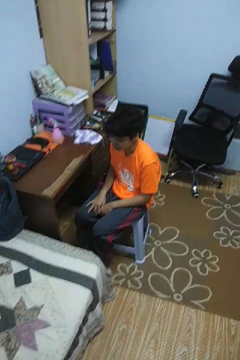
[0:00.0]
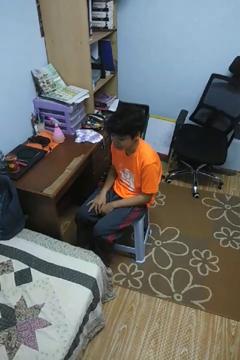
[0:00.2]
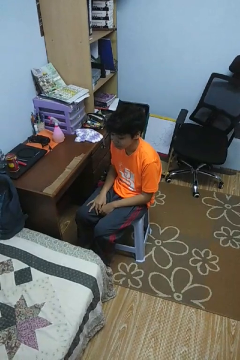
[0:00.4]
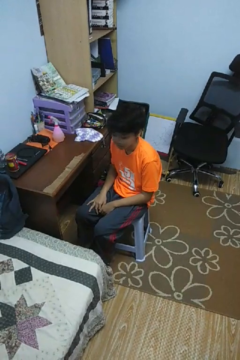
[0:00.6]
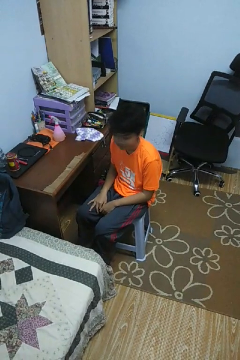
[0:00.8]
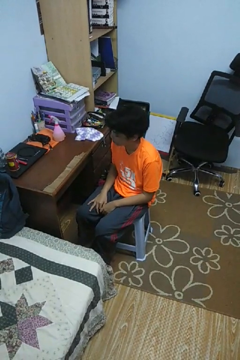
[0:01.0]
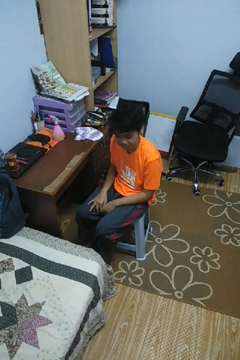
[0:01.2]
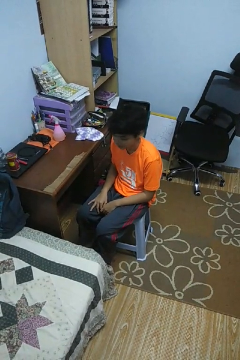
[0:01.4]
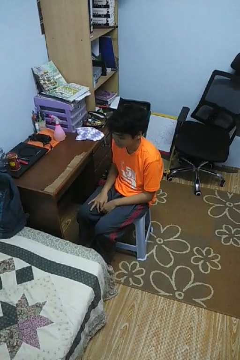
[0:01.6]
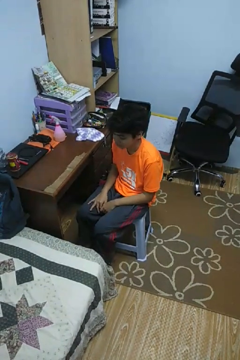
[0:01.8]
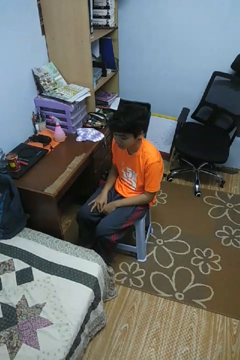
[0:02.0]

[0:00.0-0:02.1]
person shakes head

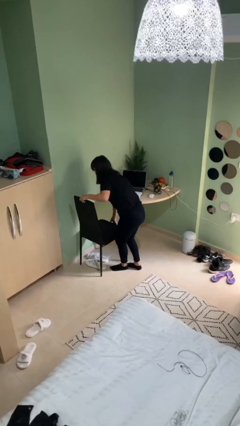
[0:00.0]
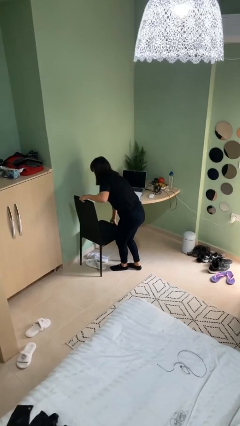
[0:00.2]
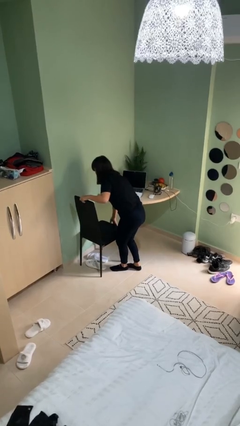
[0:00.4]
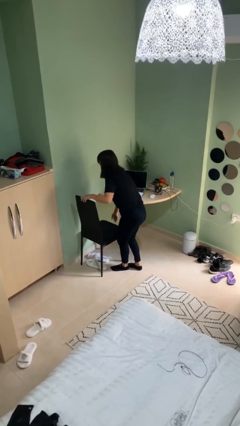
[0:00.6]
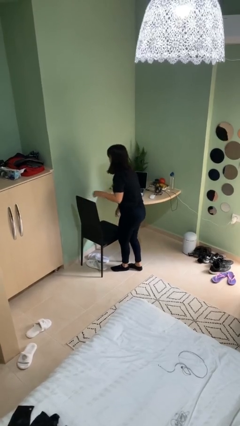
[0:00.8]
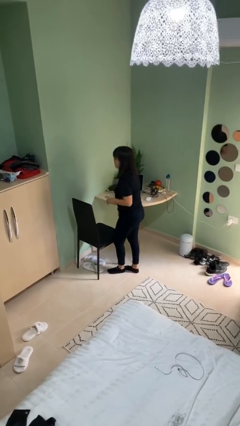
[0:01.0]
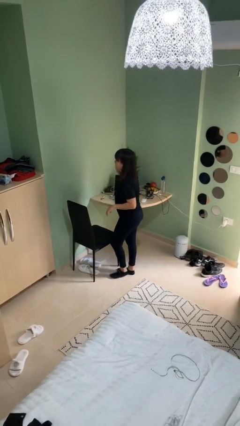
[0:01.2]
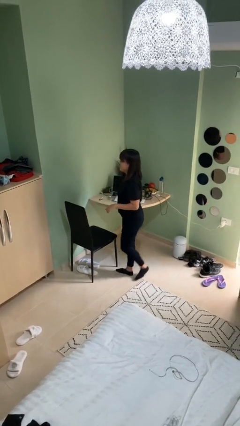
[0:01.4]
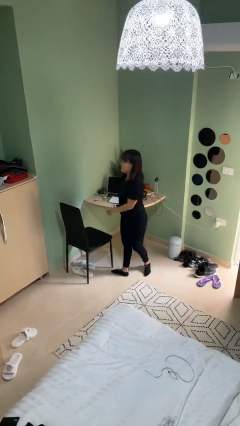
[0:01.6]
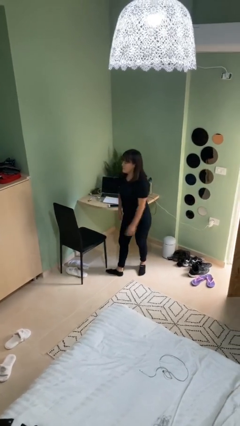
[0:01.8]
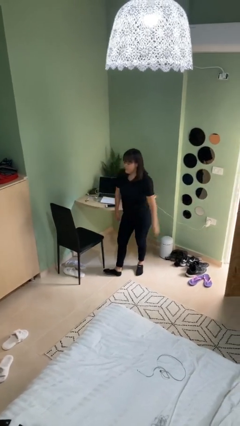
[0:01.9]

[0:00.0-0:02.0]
person puts down object on floor

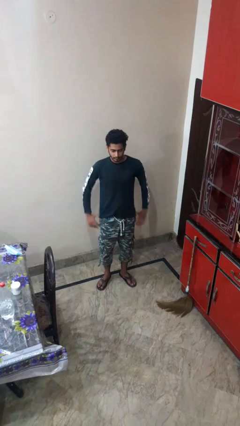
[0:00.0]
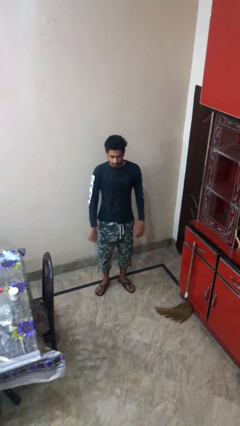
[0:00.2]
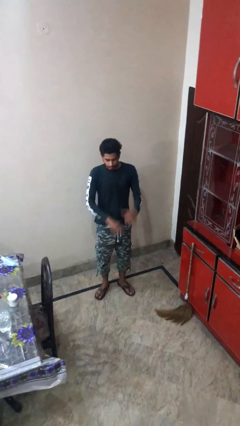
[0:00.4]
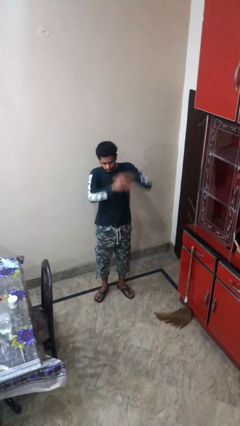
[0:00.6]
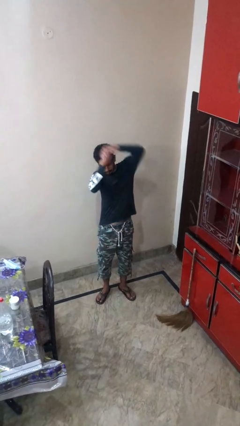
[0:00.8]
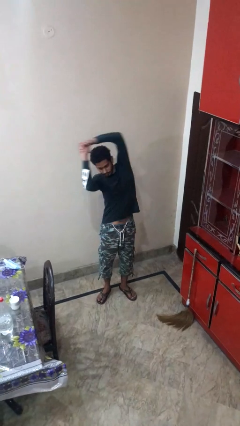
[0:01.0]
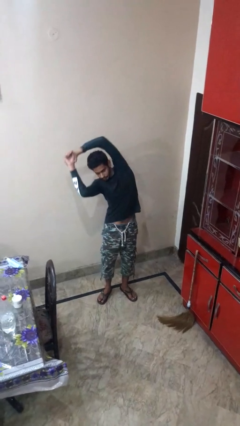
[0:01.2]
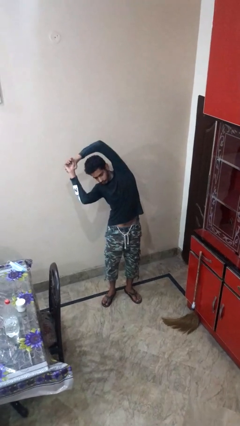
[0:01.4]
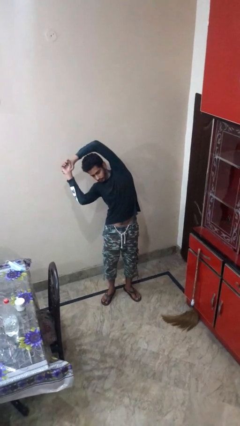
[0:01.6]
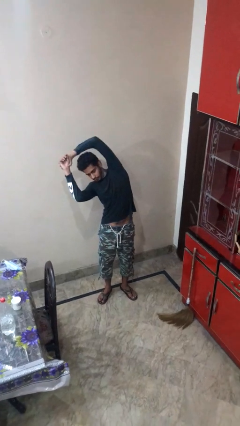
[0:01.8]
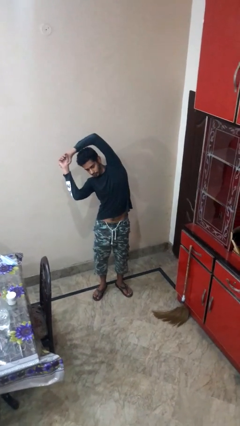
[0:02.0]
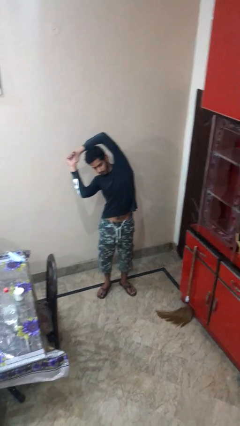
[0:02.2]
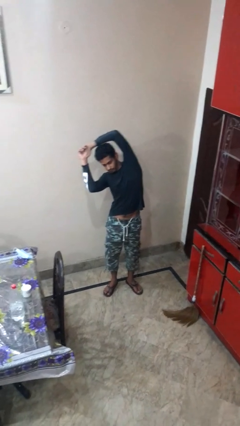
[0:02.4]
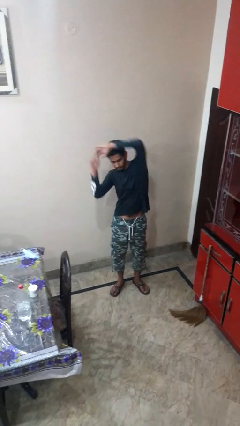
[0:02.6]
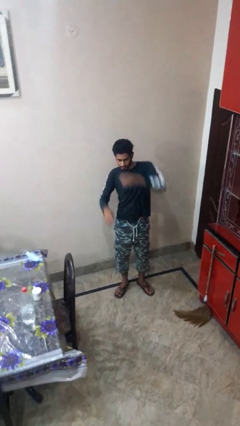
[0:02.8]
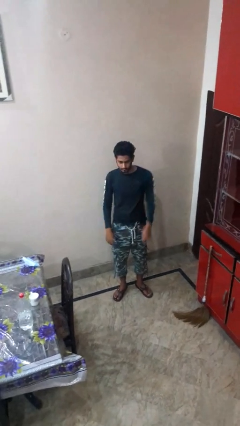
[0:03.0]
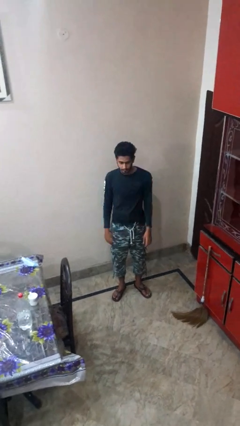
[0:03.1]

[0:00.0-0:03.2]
person stretches arms to side

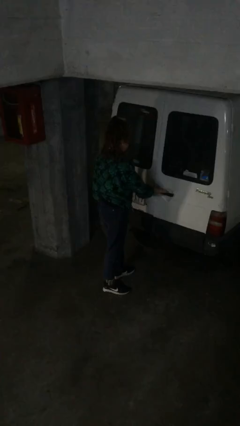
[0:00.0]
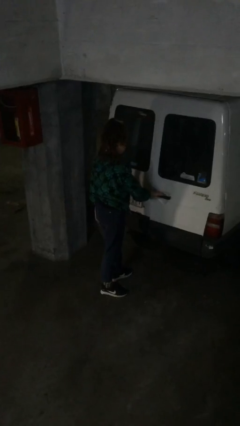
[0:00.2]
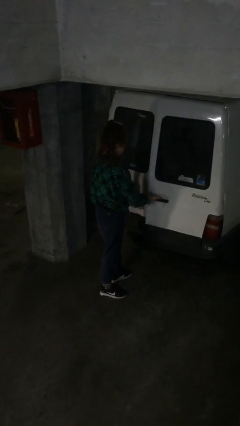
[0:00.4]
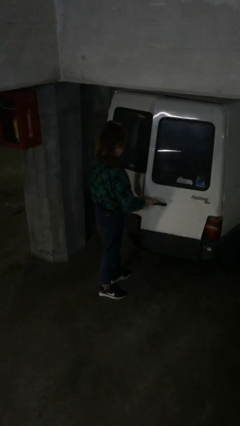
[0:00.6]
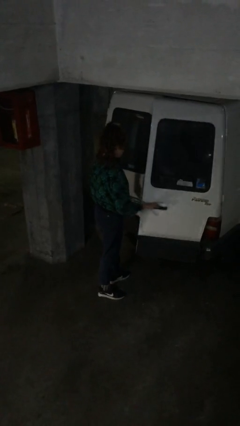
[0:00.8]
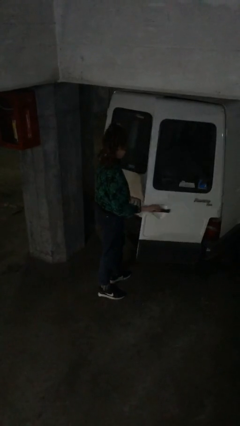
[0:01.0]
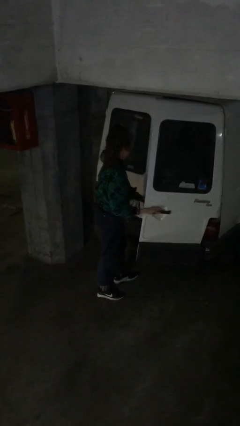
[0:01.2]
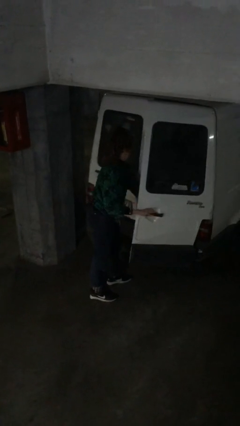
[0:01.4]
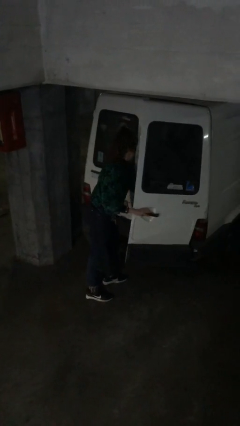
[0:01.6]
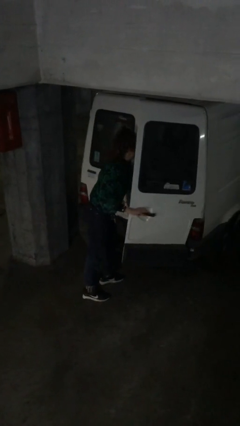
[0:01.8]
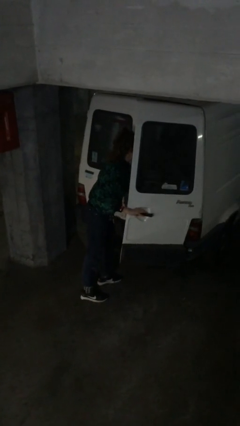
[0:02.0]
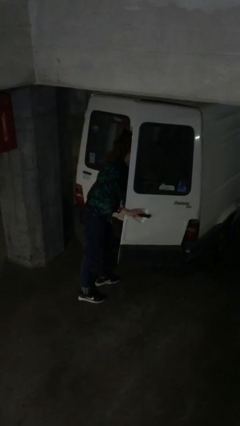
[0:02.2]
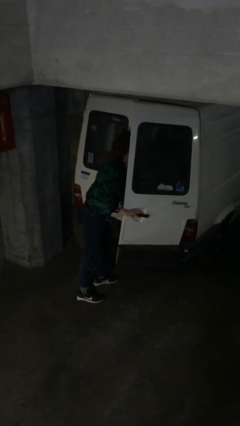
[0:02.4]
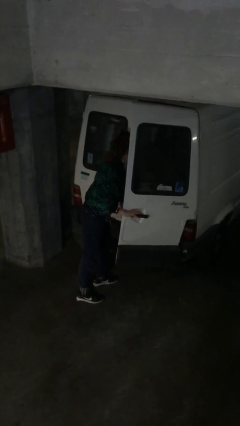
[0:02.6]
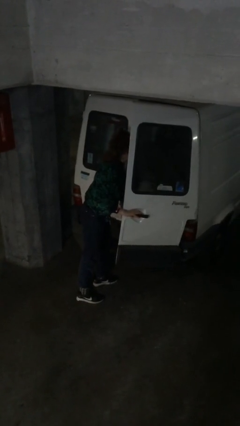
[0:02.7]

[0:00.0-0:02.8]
person opens car door

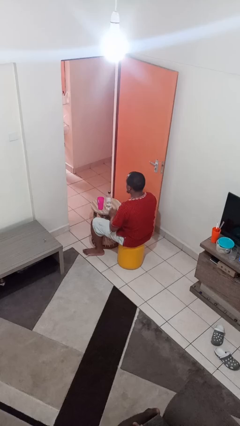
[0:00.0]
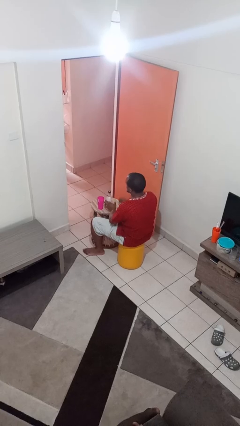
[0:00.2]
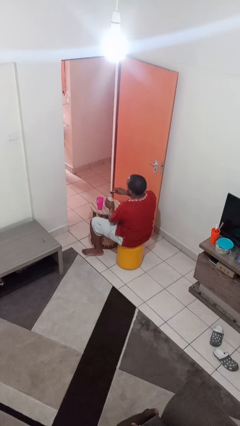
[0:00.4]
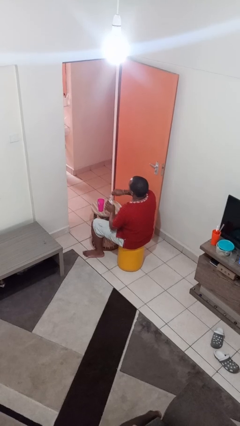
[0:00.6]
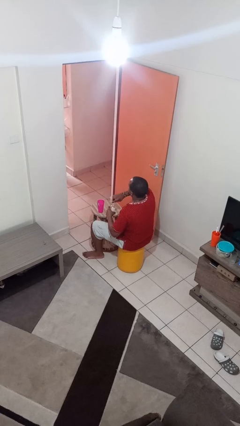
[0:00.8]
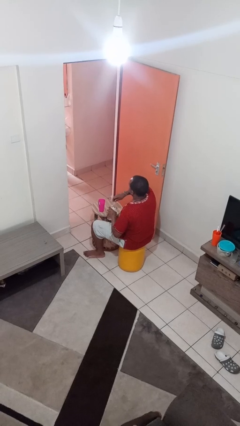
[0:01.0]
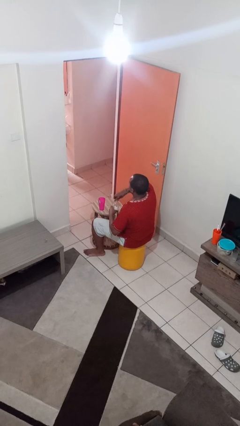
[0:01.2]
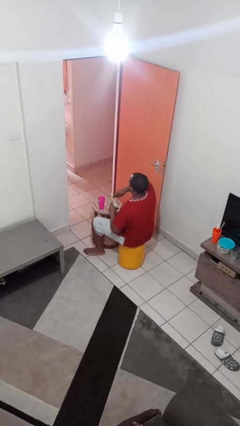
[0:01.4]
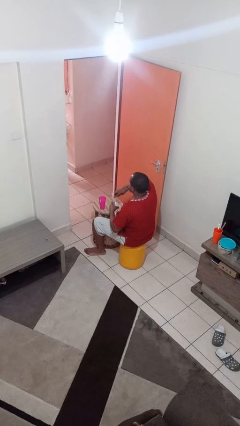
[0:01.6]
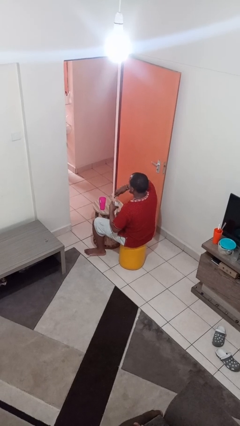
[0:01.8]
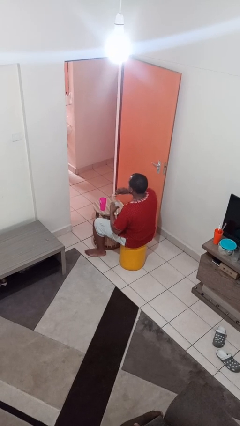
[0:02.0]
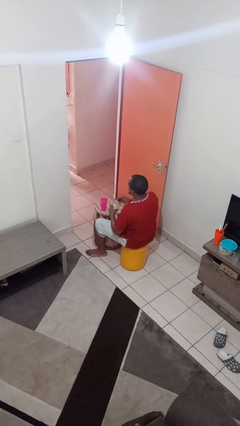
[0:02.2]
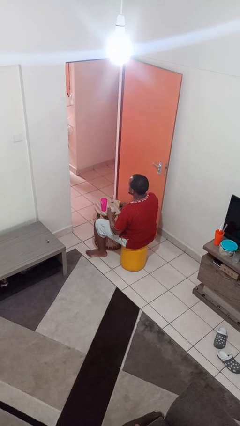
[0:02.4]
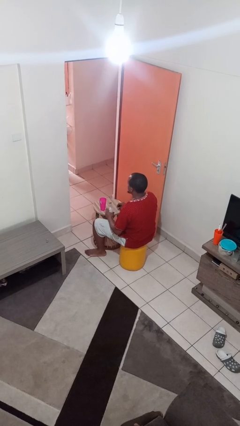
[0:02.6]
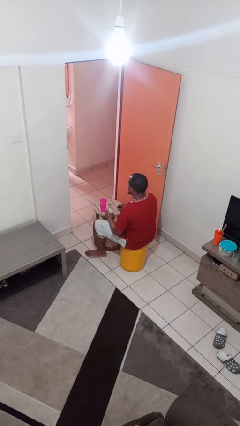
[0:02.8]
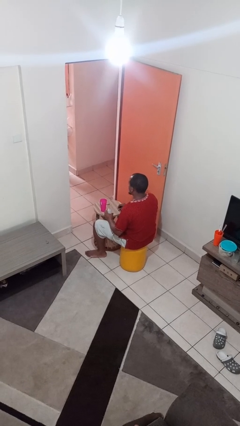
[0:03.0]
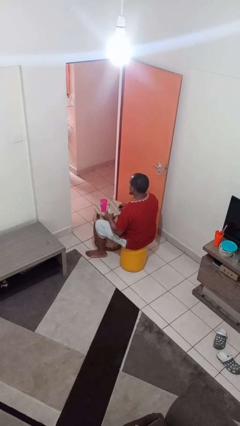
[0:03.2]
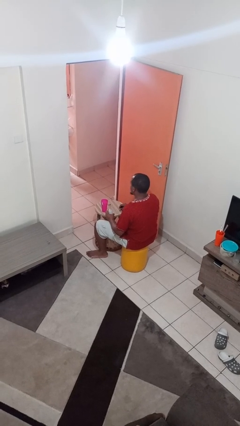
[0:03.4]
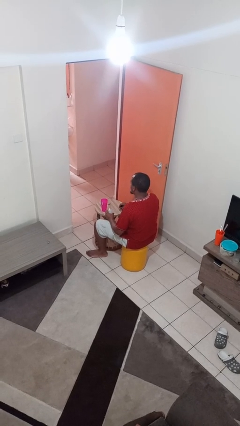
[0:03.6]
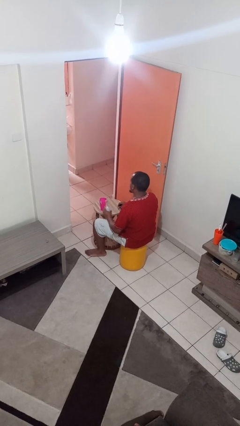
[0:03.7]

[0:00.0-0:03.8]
person unscrews lid from bottle

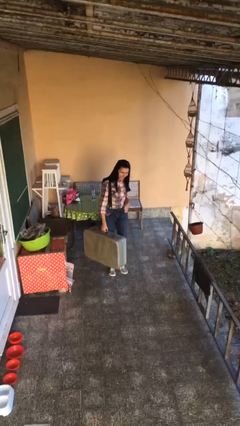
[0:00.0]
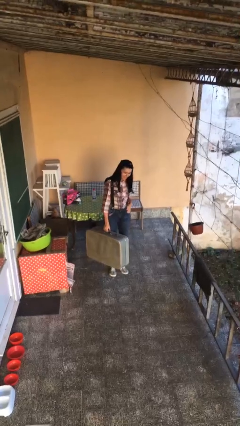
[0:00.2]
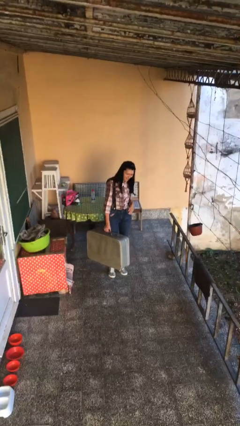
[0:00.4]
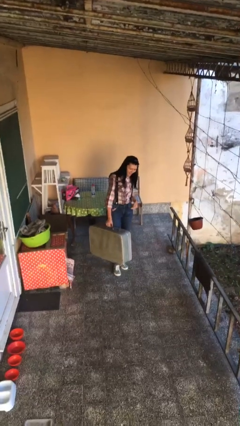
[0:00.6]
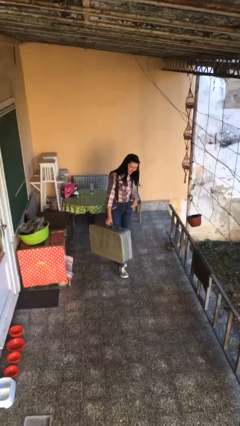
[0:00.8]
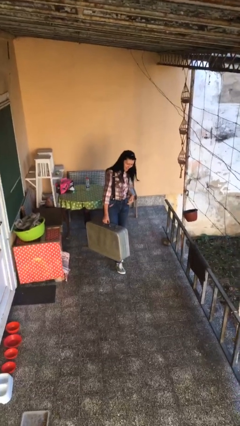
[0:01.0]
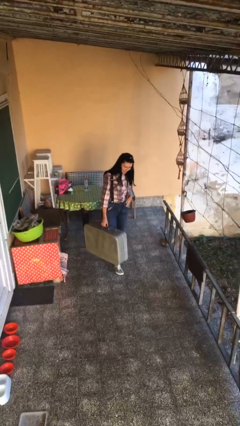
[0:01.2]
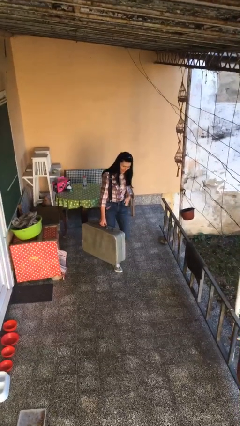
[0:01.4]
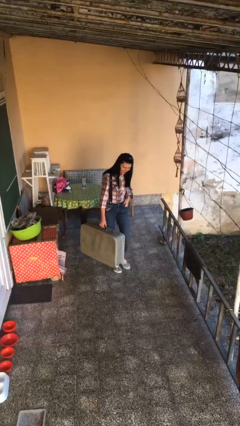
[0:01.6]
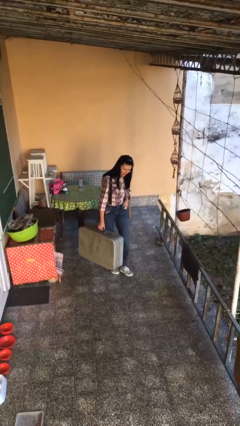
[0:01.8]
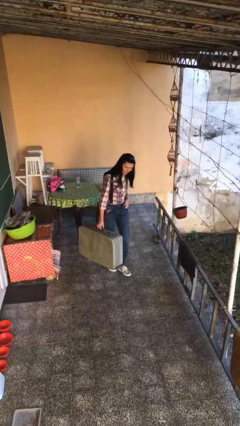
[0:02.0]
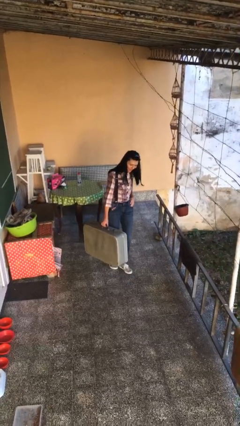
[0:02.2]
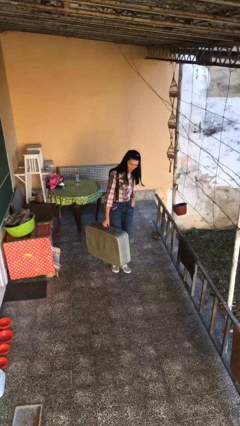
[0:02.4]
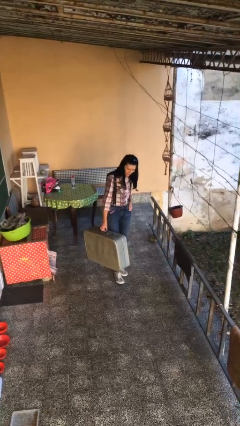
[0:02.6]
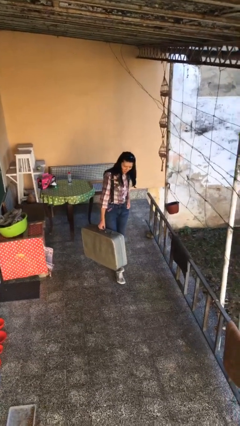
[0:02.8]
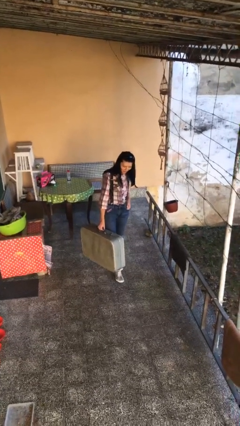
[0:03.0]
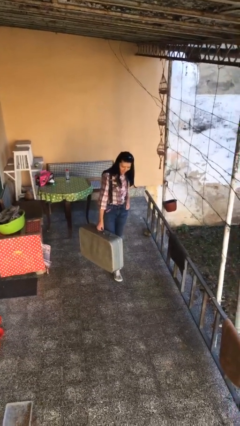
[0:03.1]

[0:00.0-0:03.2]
person carries heavy object

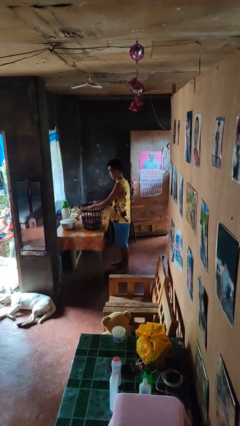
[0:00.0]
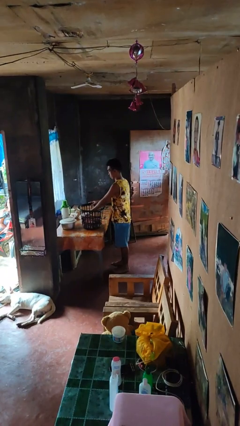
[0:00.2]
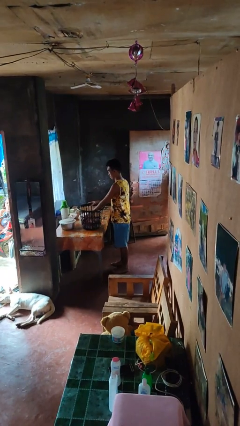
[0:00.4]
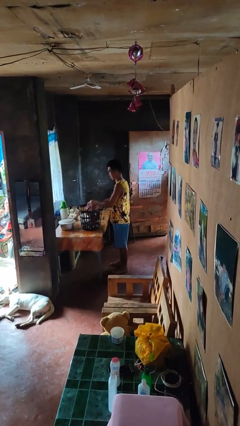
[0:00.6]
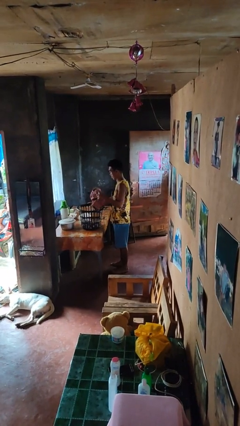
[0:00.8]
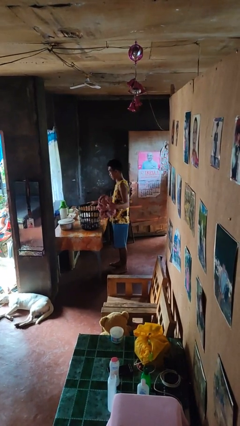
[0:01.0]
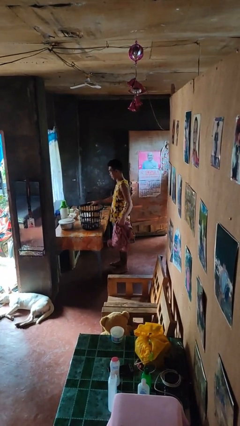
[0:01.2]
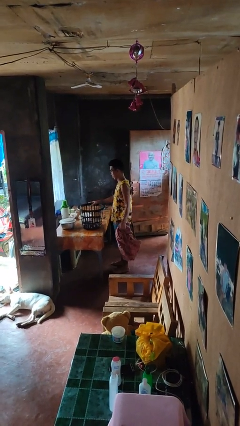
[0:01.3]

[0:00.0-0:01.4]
person takes object from basket
